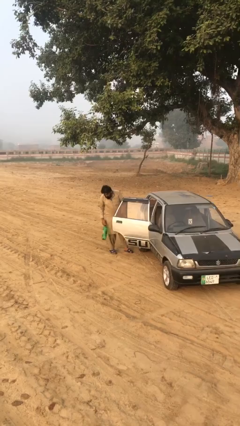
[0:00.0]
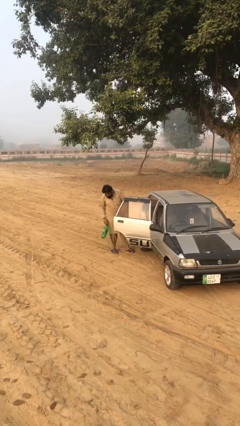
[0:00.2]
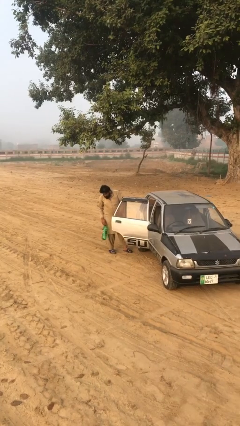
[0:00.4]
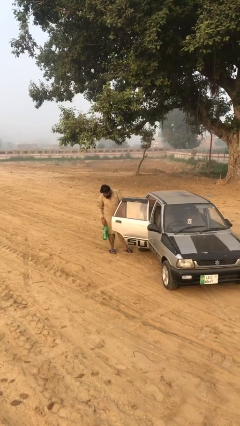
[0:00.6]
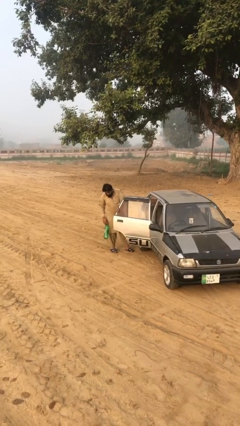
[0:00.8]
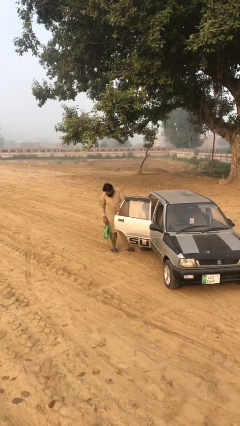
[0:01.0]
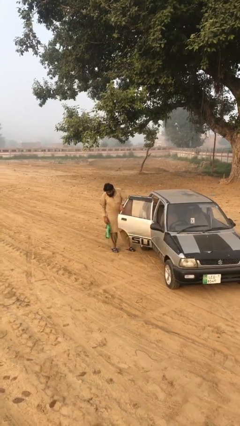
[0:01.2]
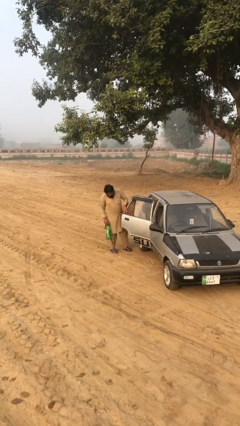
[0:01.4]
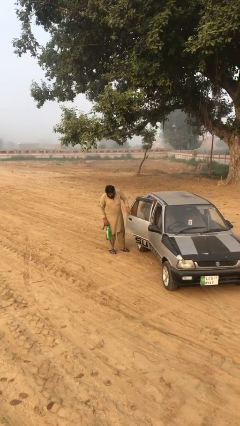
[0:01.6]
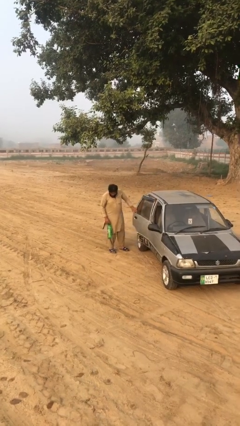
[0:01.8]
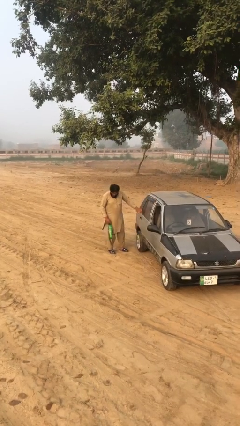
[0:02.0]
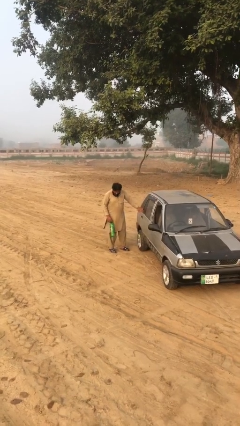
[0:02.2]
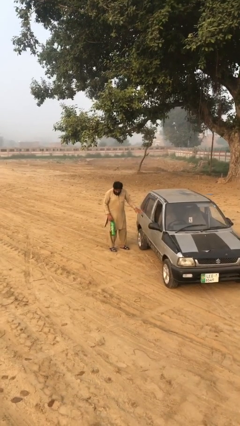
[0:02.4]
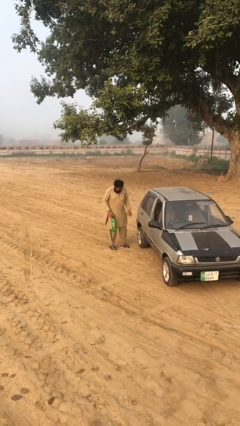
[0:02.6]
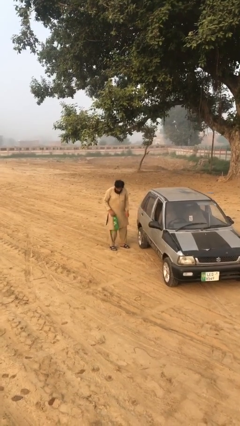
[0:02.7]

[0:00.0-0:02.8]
person closes car door

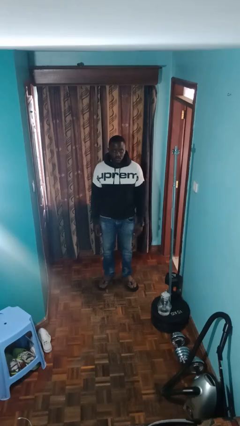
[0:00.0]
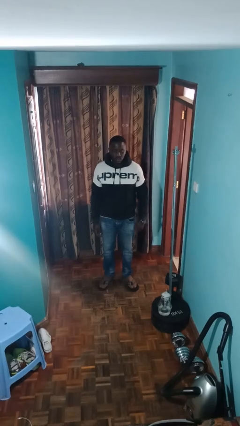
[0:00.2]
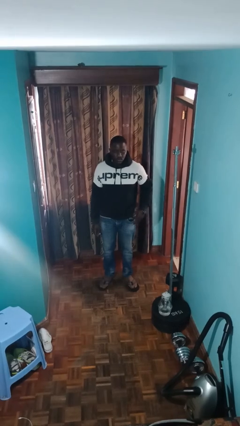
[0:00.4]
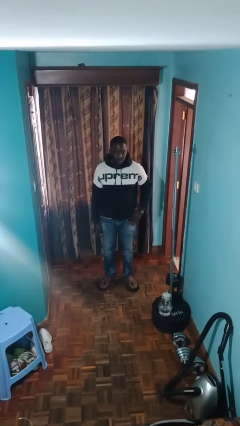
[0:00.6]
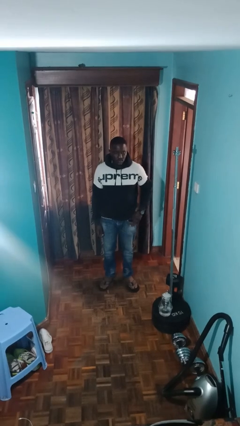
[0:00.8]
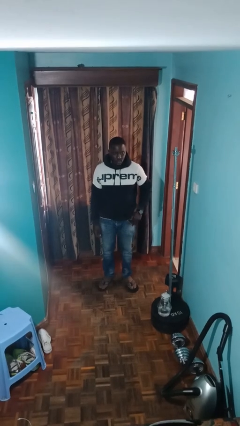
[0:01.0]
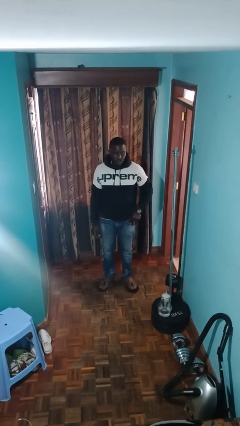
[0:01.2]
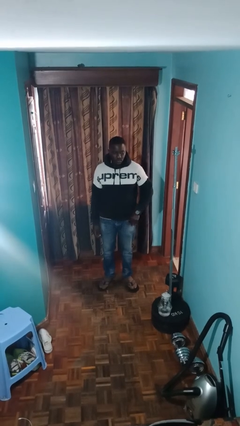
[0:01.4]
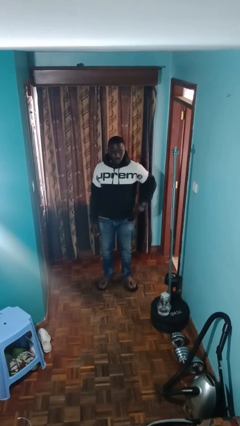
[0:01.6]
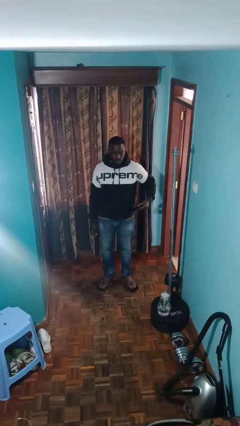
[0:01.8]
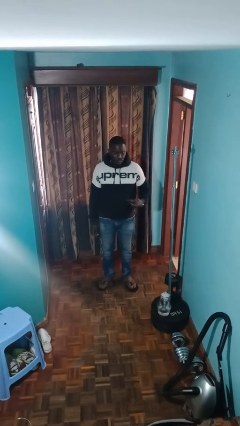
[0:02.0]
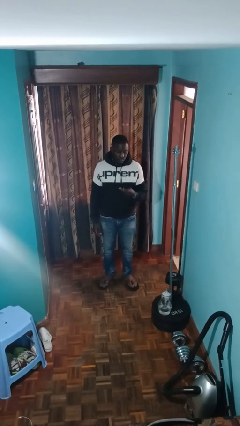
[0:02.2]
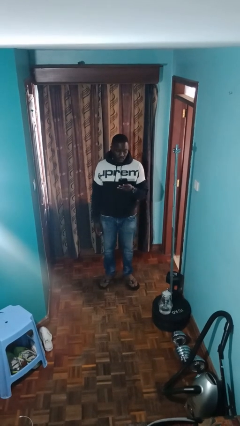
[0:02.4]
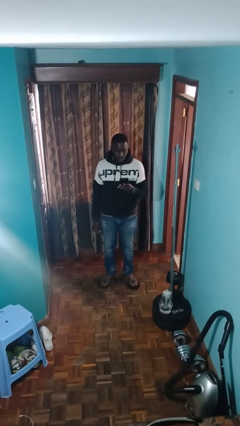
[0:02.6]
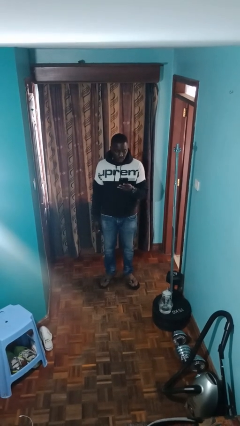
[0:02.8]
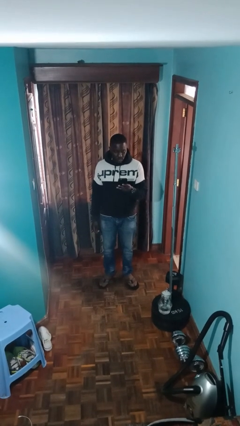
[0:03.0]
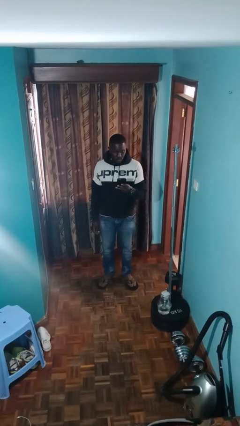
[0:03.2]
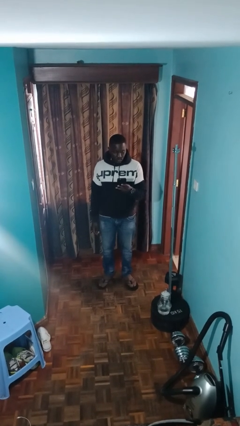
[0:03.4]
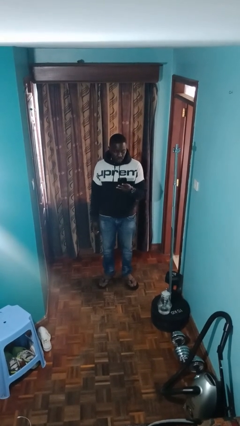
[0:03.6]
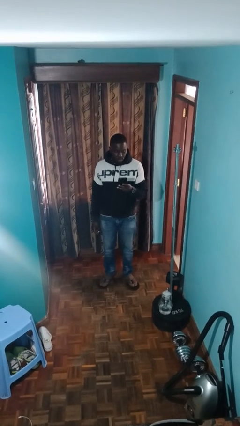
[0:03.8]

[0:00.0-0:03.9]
person takes phone from pocket

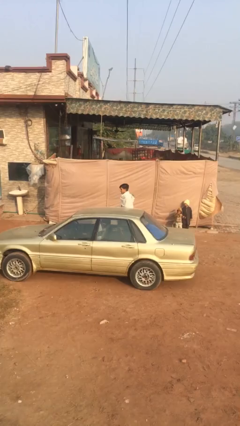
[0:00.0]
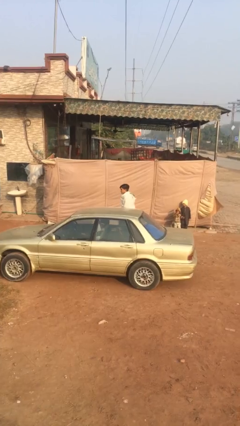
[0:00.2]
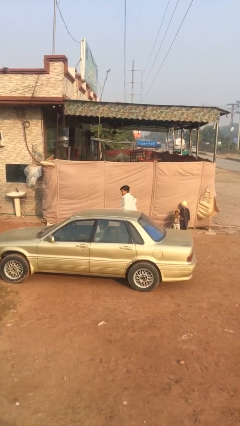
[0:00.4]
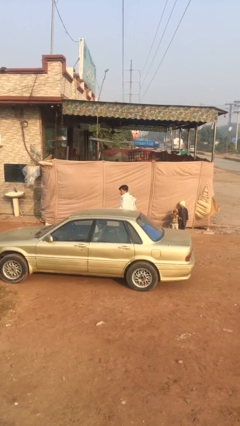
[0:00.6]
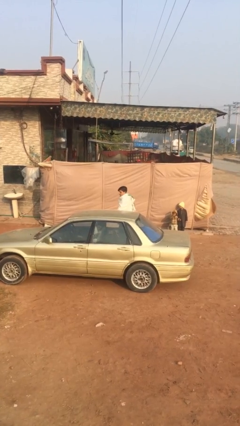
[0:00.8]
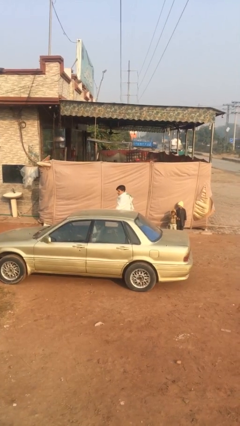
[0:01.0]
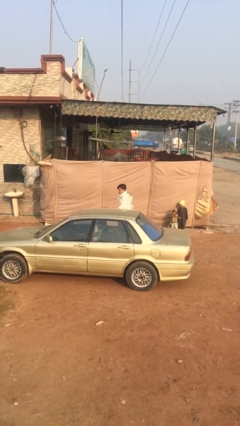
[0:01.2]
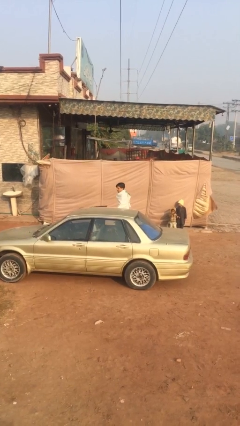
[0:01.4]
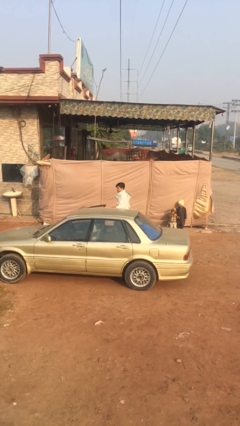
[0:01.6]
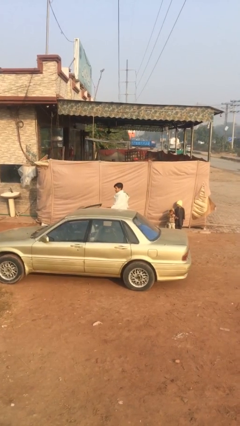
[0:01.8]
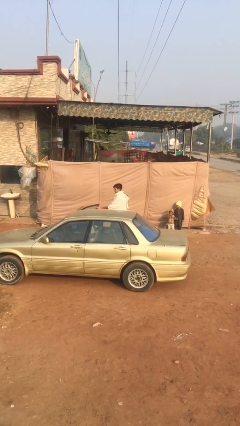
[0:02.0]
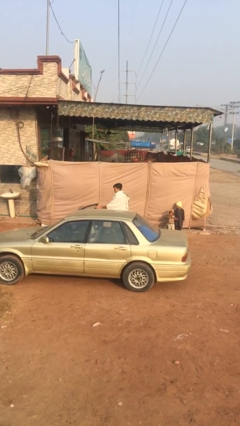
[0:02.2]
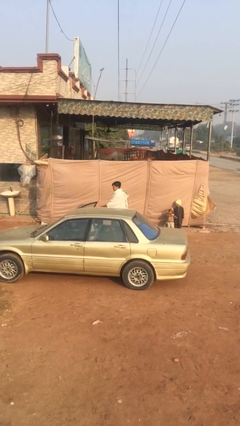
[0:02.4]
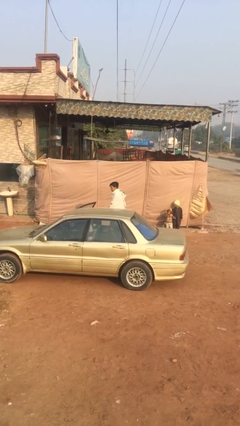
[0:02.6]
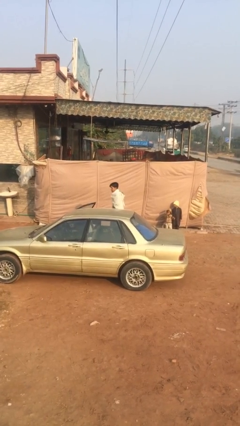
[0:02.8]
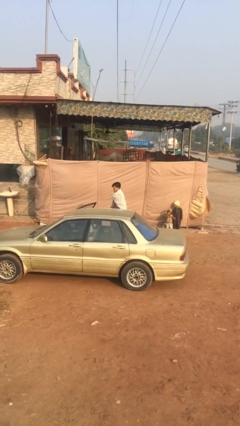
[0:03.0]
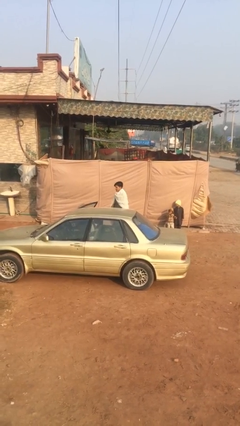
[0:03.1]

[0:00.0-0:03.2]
person opens car door

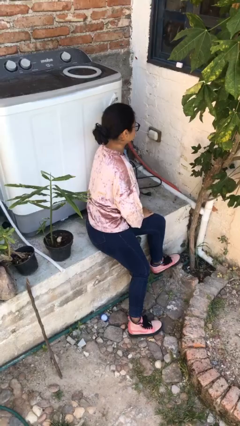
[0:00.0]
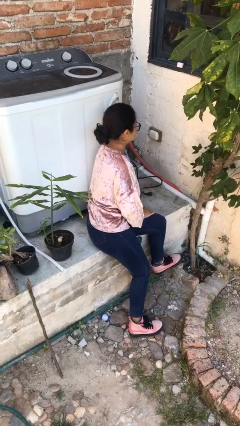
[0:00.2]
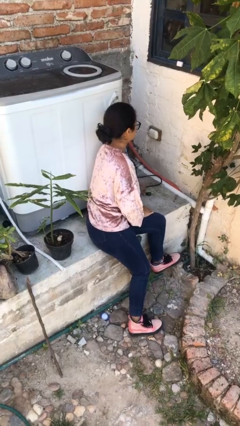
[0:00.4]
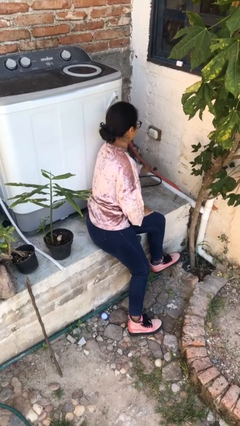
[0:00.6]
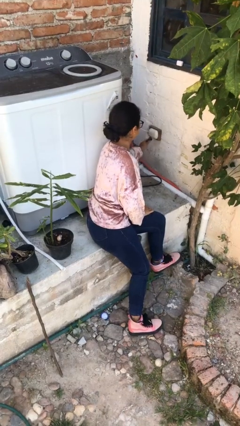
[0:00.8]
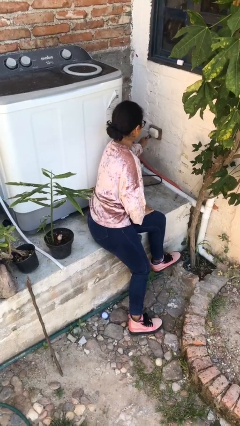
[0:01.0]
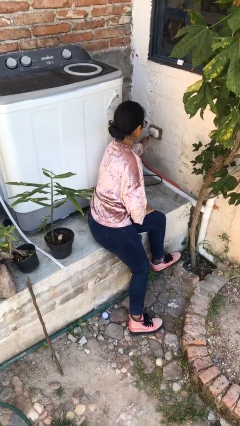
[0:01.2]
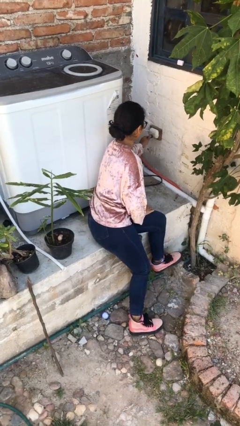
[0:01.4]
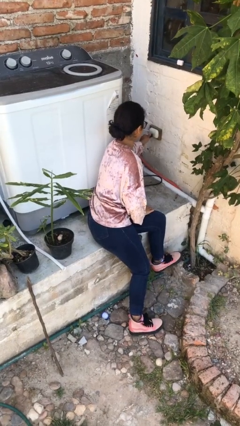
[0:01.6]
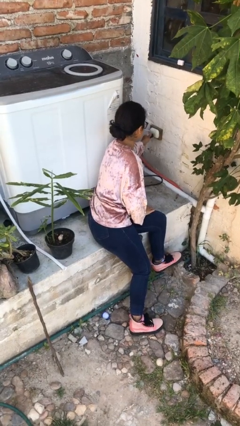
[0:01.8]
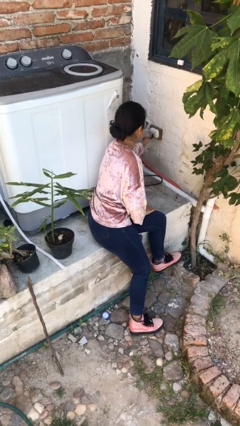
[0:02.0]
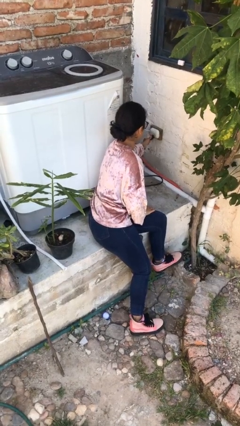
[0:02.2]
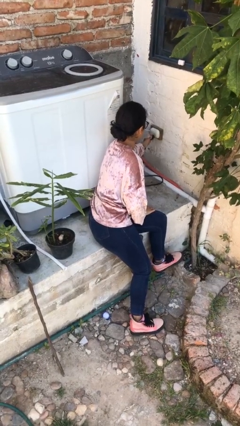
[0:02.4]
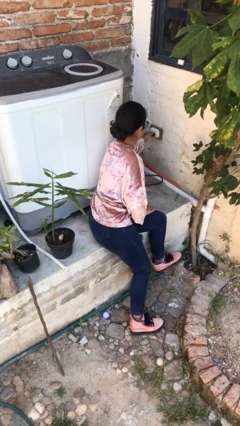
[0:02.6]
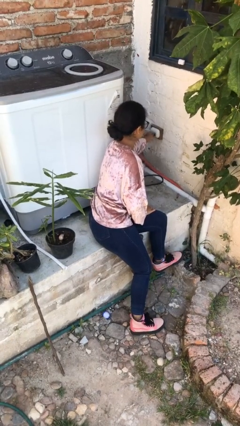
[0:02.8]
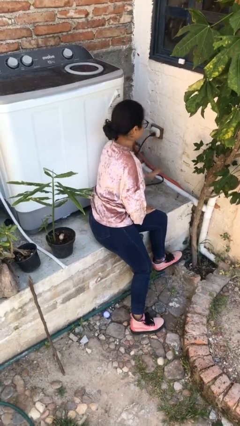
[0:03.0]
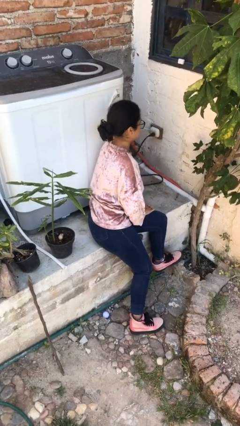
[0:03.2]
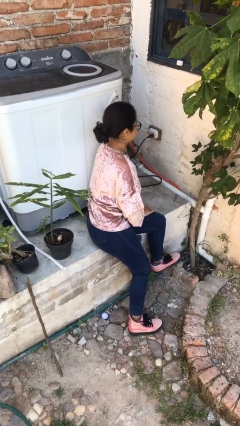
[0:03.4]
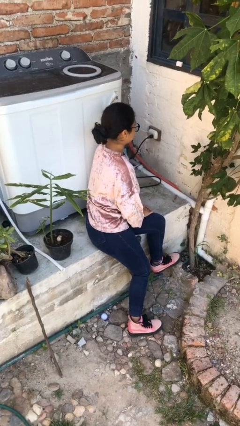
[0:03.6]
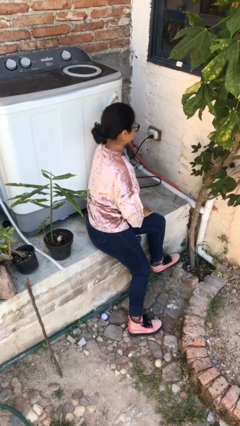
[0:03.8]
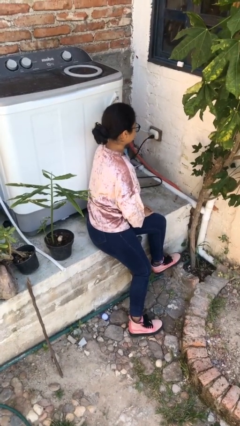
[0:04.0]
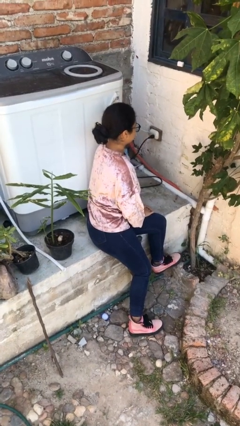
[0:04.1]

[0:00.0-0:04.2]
person plugs into electrical socket

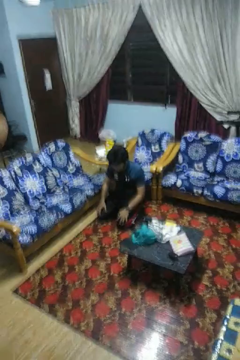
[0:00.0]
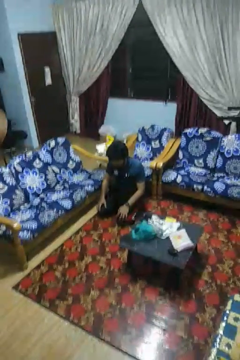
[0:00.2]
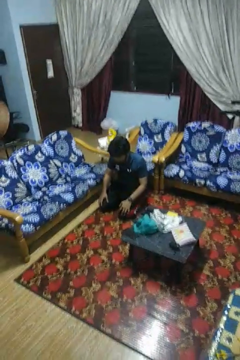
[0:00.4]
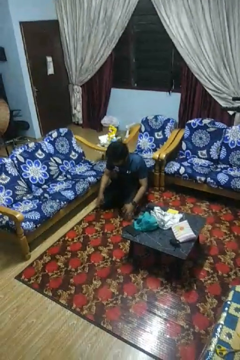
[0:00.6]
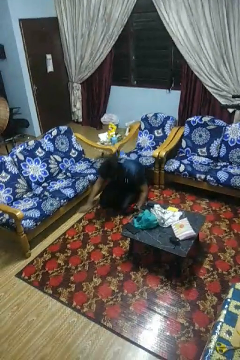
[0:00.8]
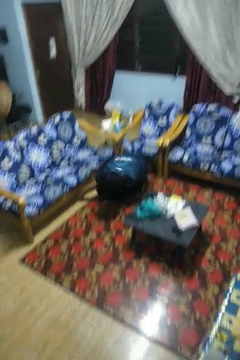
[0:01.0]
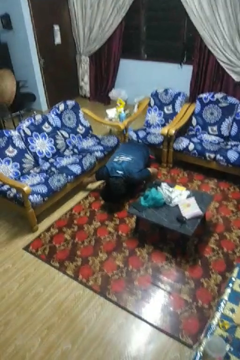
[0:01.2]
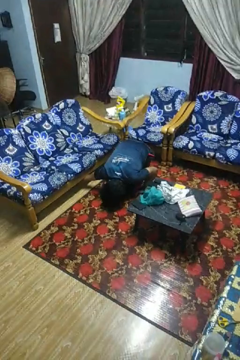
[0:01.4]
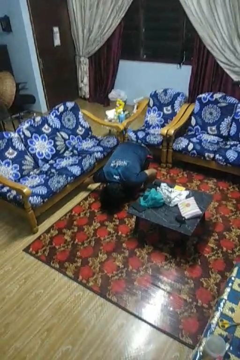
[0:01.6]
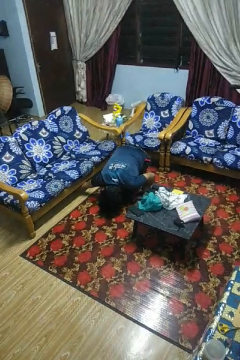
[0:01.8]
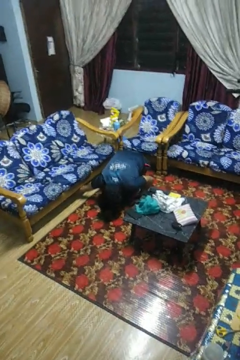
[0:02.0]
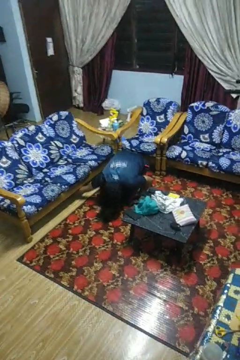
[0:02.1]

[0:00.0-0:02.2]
person searches under couch

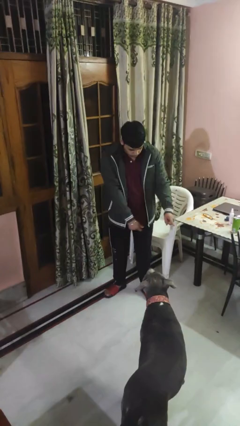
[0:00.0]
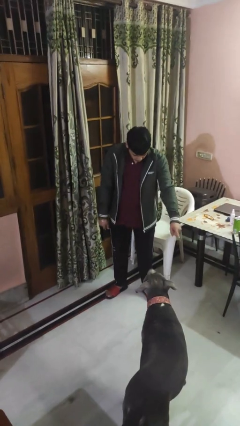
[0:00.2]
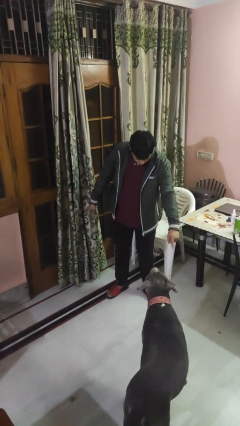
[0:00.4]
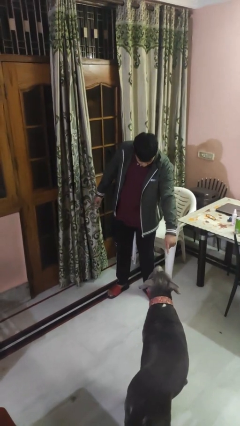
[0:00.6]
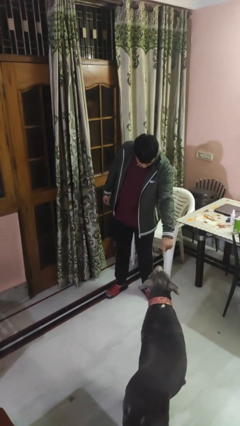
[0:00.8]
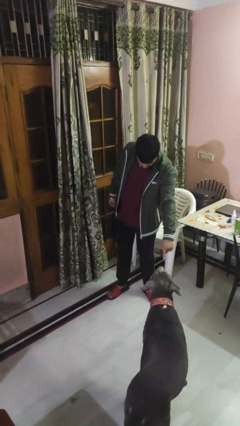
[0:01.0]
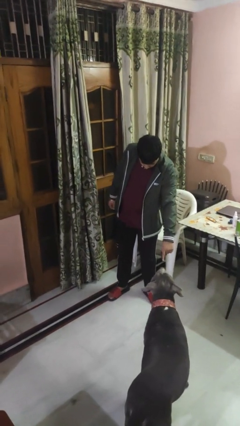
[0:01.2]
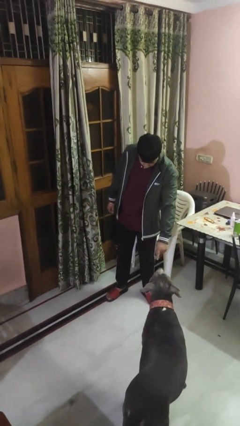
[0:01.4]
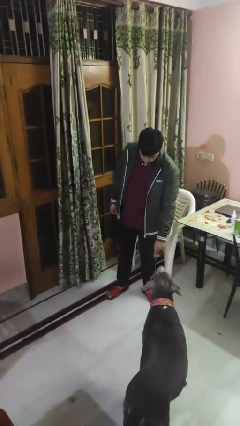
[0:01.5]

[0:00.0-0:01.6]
person points to dog

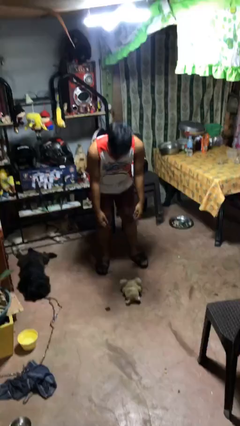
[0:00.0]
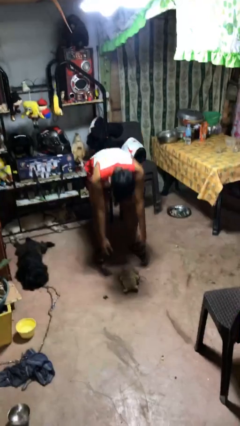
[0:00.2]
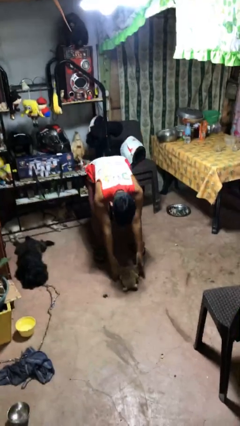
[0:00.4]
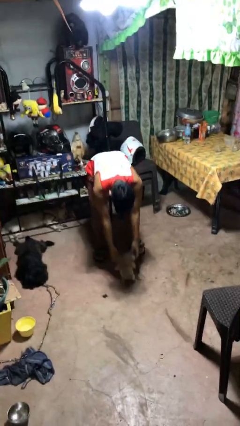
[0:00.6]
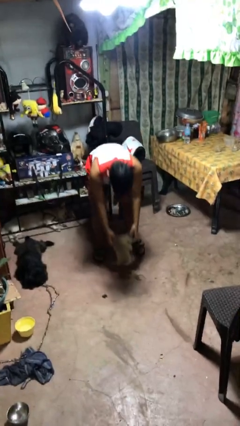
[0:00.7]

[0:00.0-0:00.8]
person picks up object from floor
